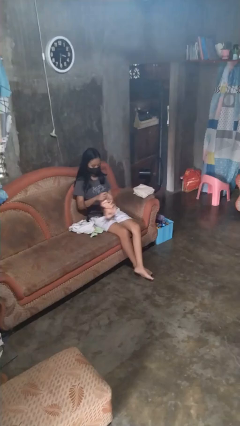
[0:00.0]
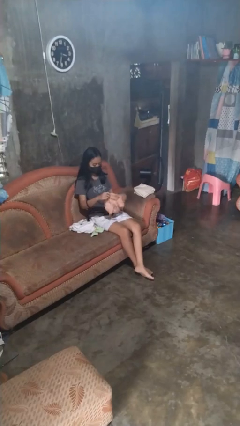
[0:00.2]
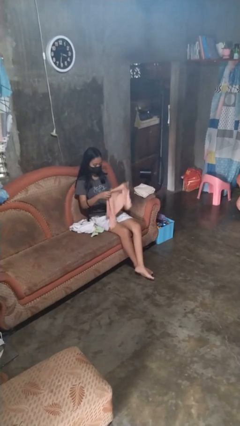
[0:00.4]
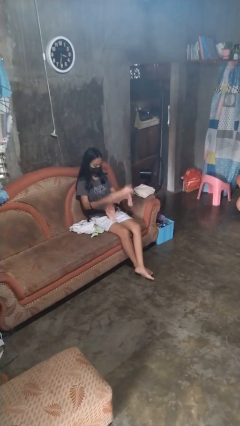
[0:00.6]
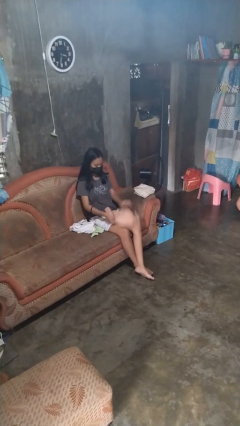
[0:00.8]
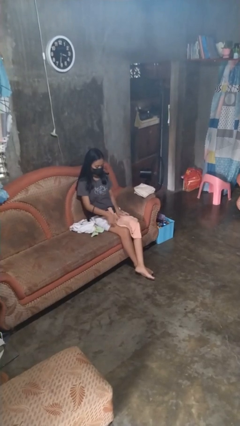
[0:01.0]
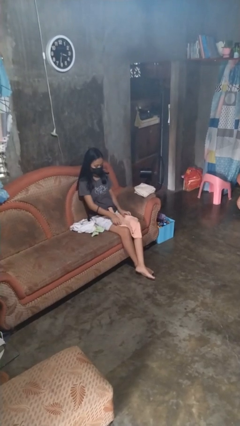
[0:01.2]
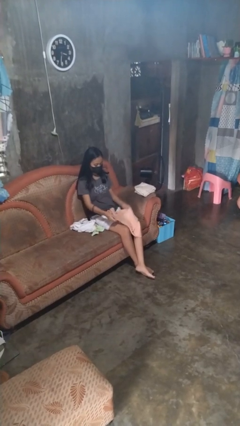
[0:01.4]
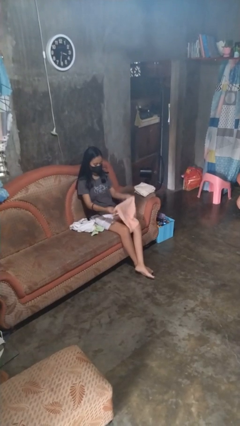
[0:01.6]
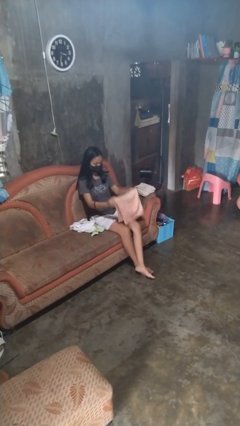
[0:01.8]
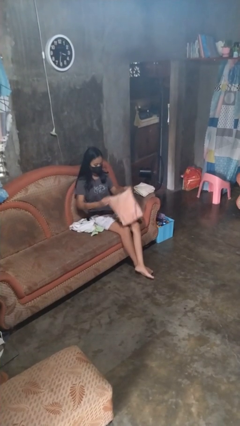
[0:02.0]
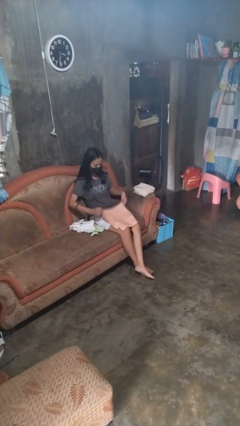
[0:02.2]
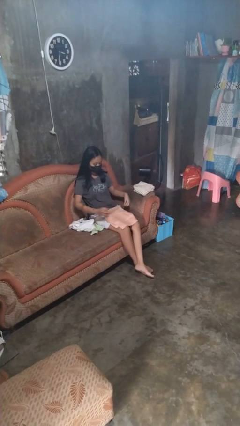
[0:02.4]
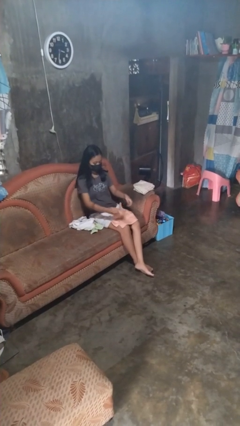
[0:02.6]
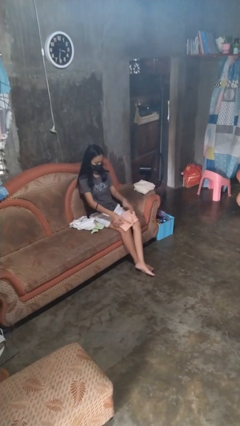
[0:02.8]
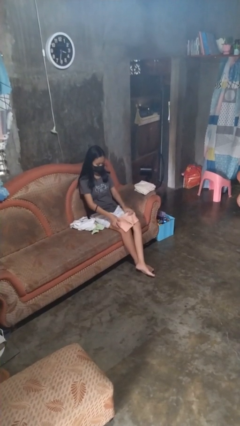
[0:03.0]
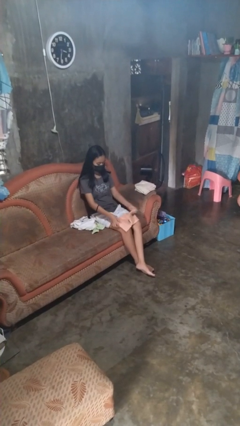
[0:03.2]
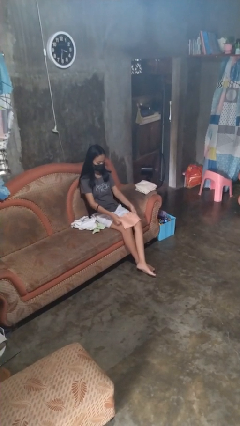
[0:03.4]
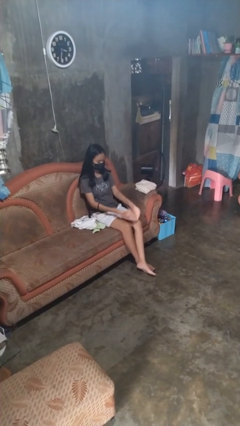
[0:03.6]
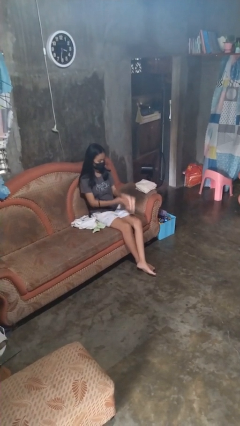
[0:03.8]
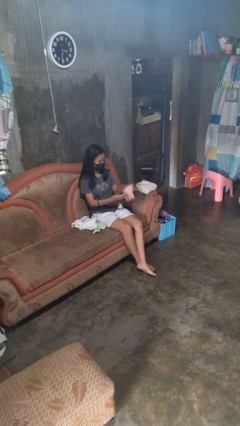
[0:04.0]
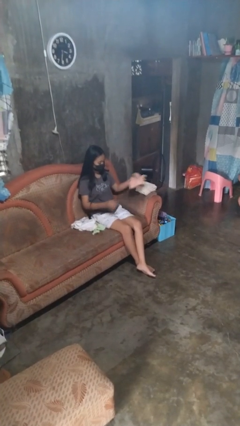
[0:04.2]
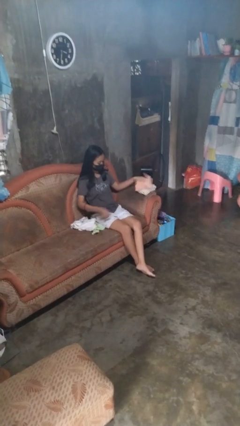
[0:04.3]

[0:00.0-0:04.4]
person folds towel

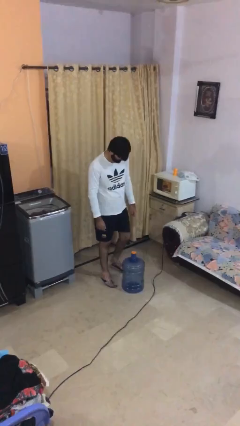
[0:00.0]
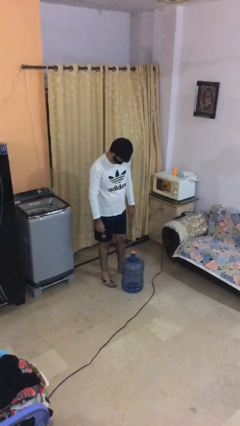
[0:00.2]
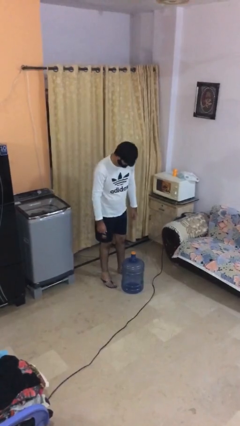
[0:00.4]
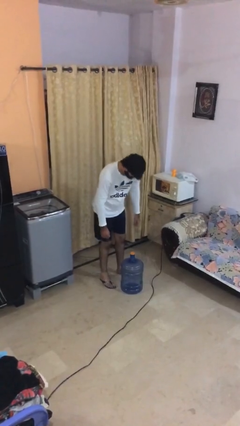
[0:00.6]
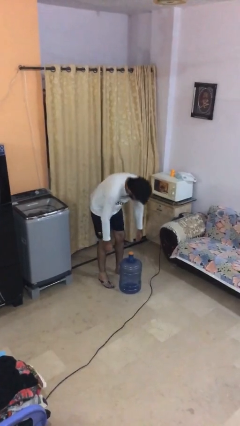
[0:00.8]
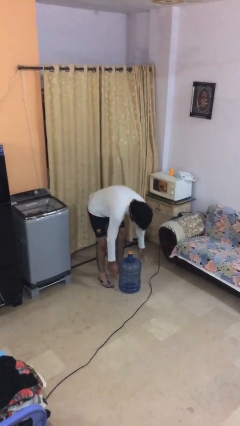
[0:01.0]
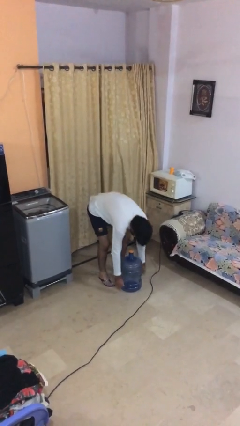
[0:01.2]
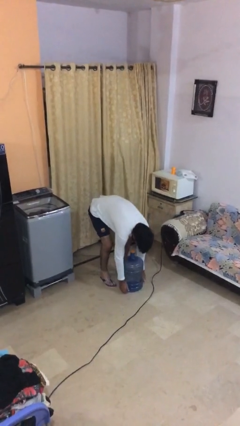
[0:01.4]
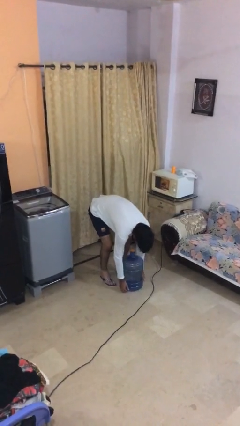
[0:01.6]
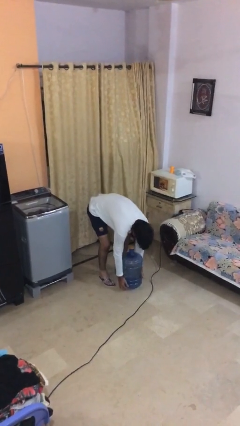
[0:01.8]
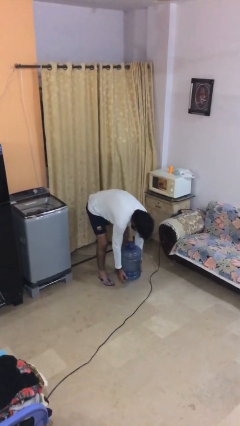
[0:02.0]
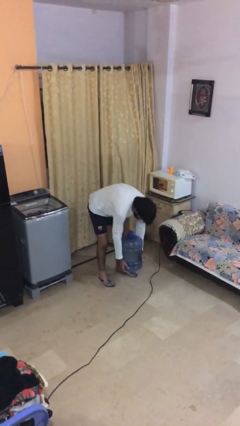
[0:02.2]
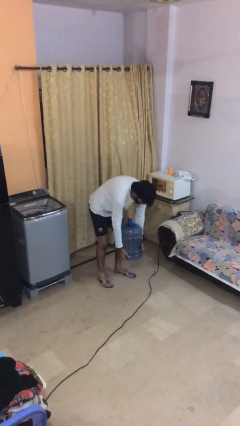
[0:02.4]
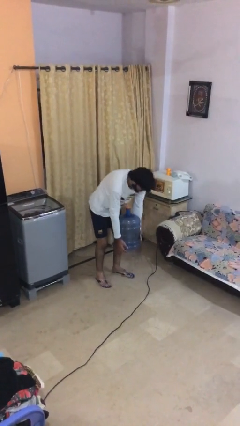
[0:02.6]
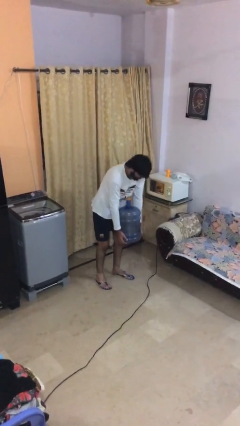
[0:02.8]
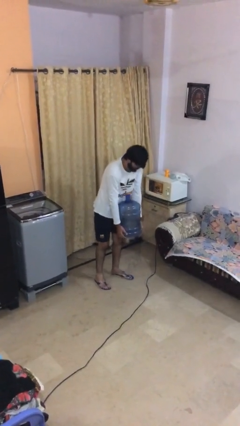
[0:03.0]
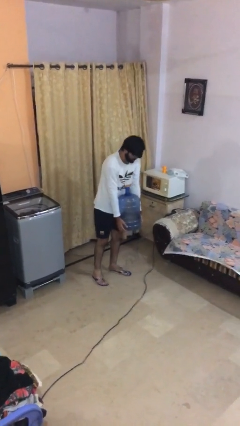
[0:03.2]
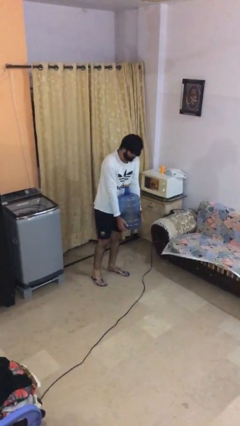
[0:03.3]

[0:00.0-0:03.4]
person picks up object from floor

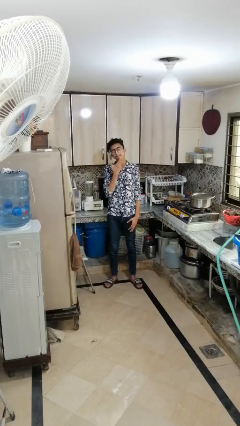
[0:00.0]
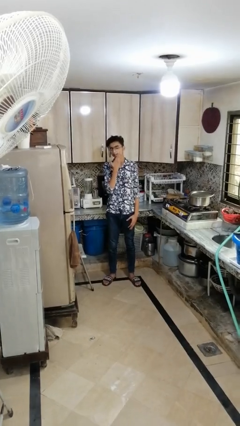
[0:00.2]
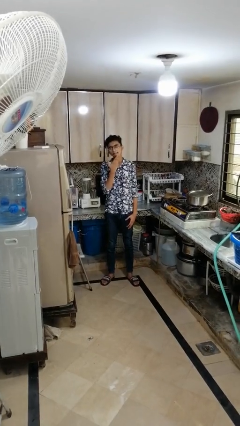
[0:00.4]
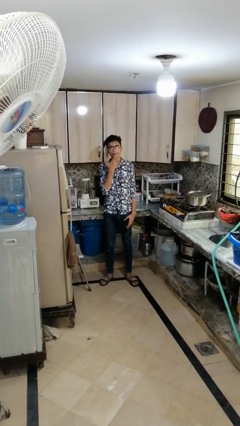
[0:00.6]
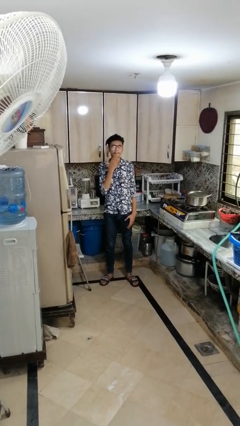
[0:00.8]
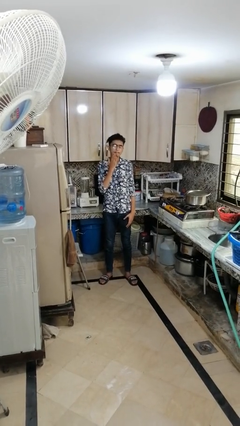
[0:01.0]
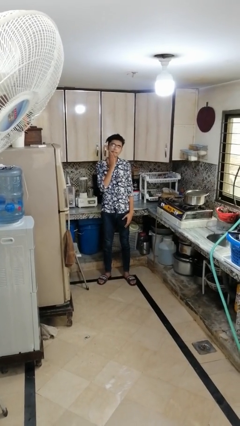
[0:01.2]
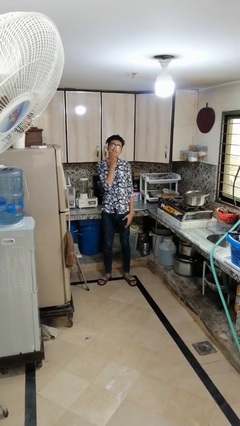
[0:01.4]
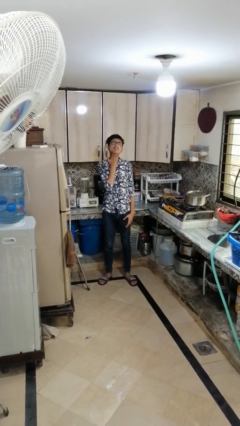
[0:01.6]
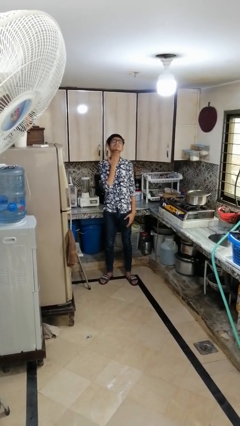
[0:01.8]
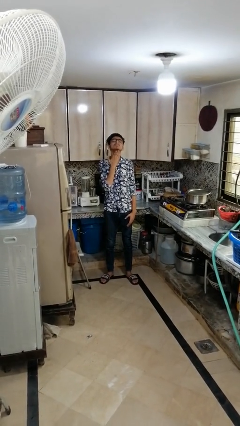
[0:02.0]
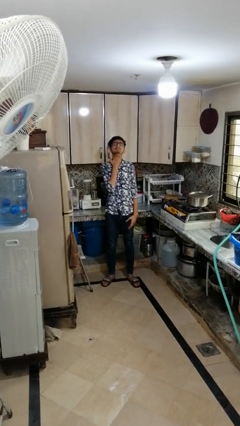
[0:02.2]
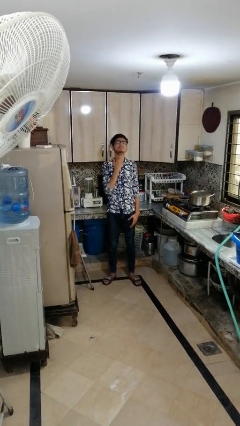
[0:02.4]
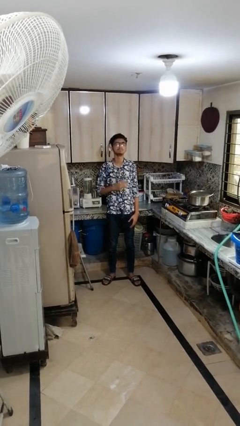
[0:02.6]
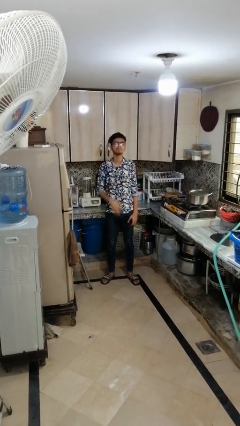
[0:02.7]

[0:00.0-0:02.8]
person strokes chin

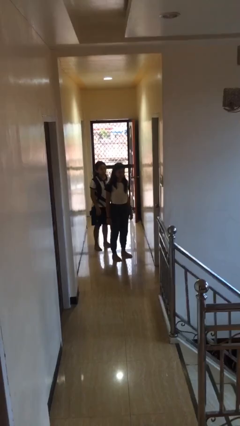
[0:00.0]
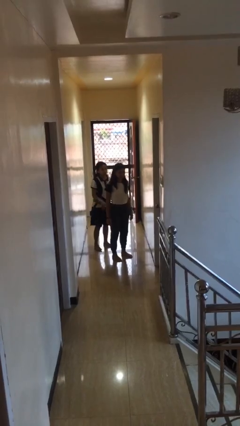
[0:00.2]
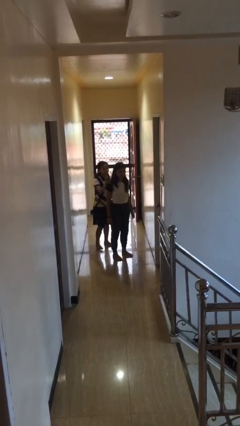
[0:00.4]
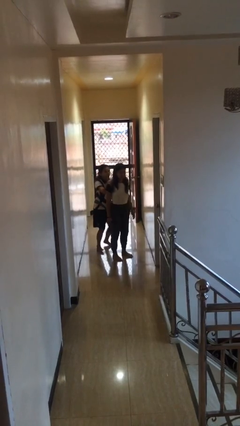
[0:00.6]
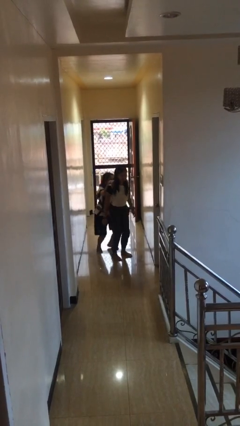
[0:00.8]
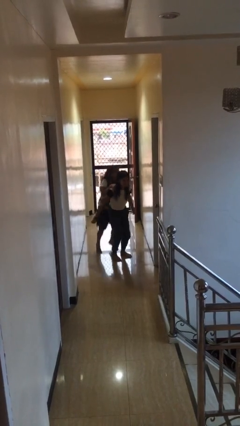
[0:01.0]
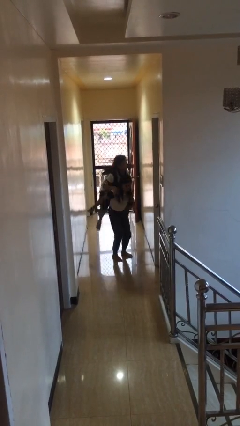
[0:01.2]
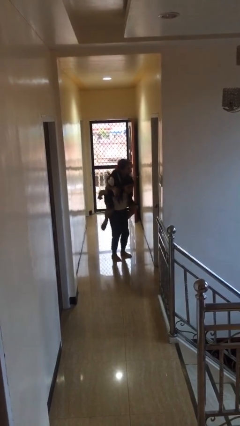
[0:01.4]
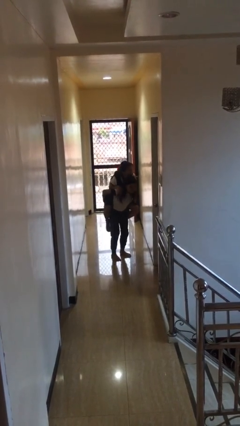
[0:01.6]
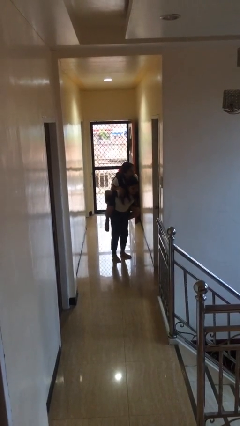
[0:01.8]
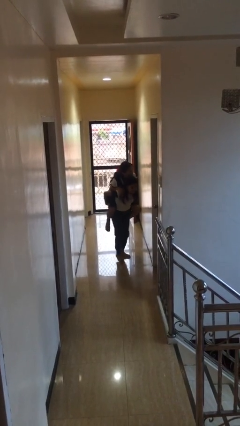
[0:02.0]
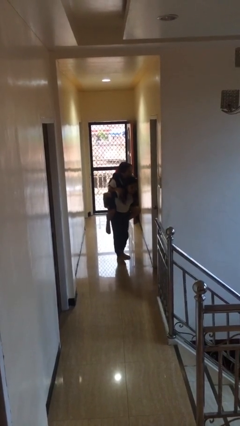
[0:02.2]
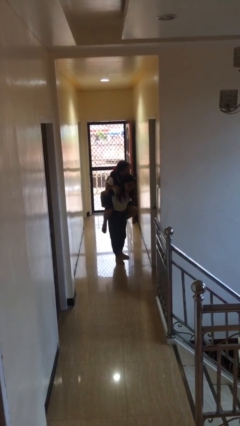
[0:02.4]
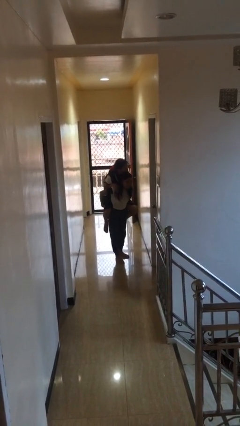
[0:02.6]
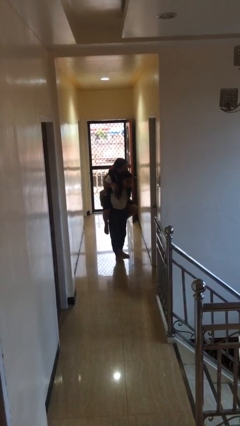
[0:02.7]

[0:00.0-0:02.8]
person carries person over shoulder

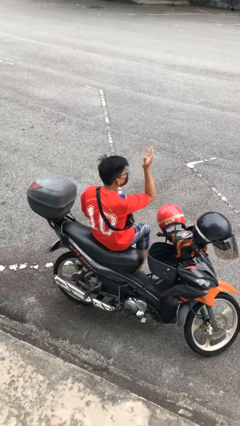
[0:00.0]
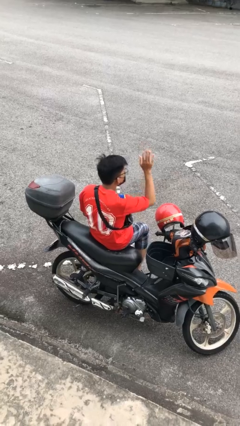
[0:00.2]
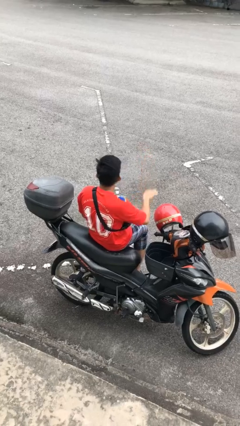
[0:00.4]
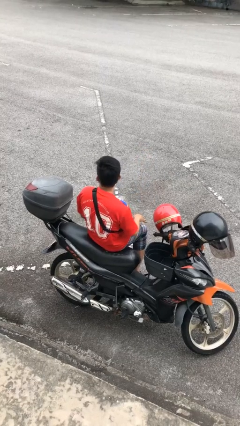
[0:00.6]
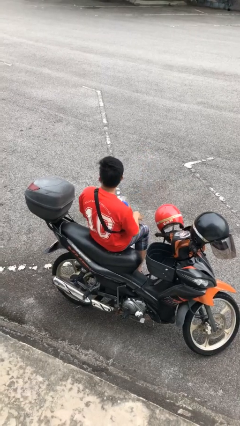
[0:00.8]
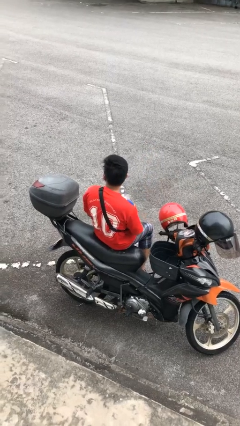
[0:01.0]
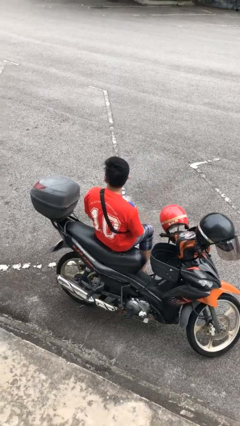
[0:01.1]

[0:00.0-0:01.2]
person gestures swipe down

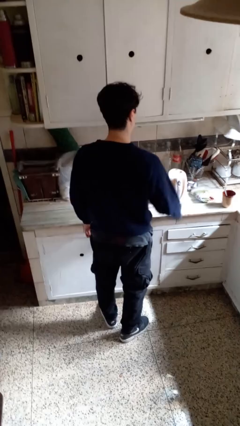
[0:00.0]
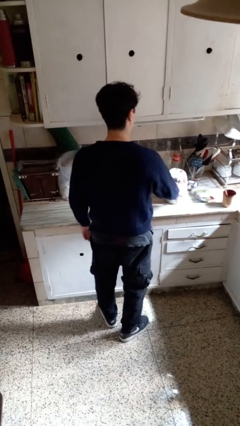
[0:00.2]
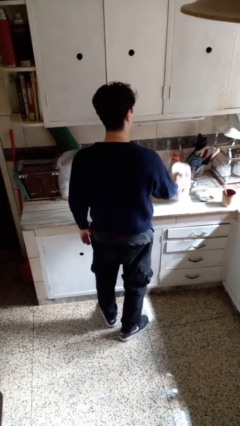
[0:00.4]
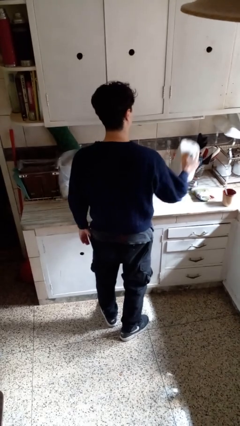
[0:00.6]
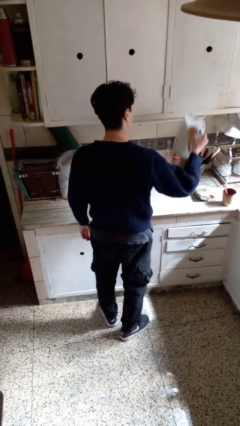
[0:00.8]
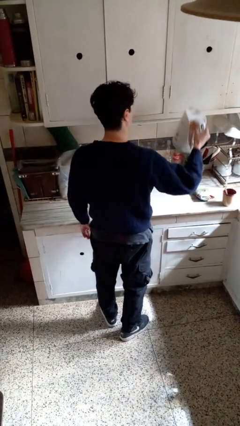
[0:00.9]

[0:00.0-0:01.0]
person picks up object from countertop

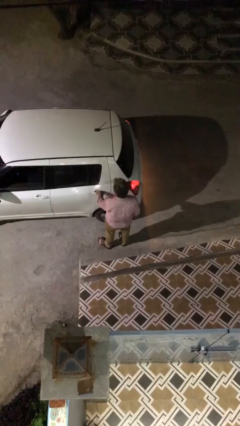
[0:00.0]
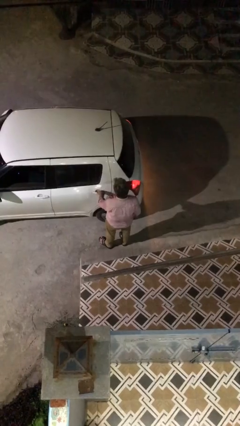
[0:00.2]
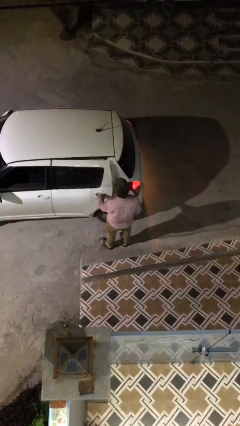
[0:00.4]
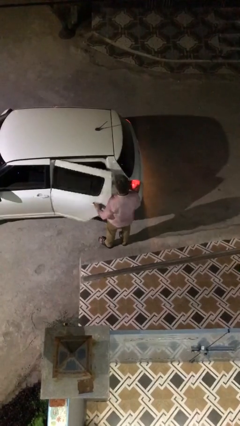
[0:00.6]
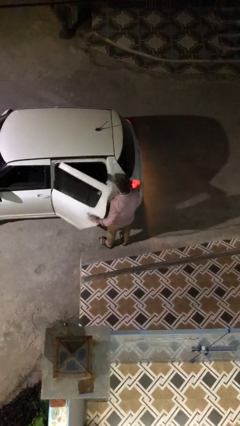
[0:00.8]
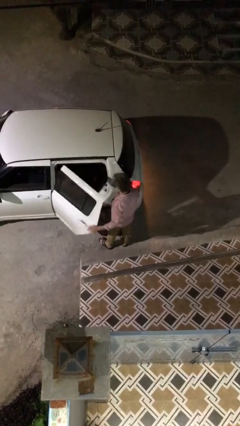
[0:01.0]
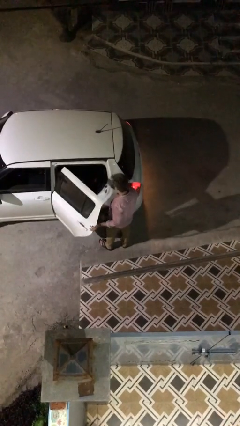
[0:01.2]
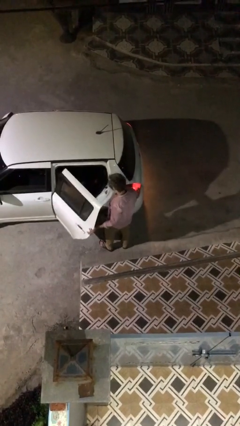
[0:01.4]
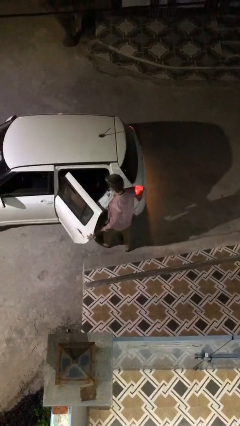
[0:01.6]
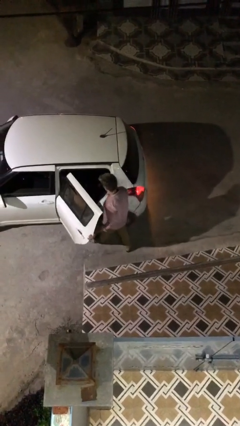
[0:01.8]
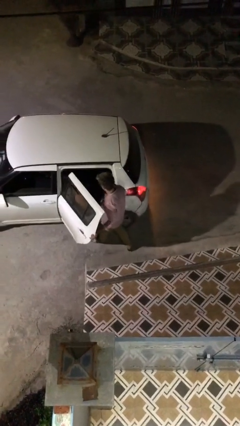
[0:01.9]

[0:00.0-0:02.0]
person opens car door
